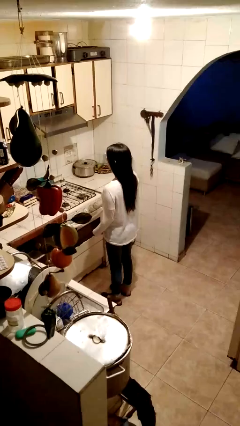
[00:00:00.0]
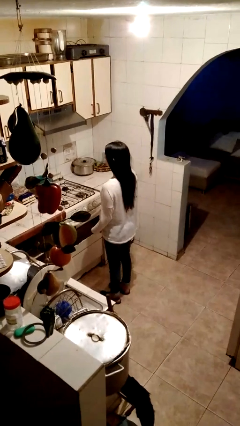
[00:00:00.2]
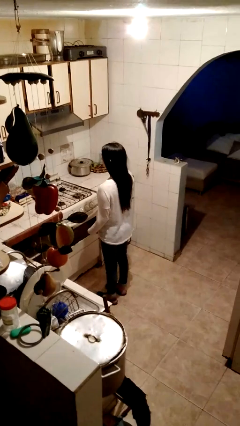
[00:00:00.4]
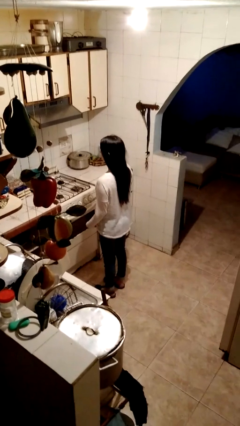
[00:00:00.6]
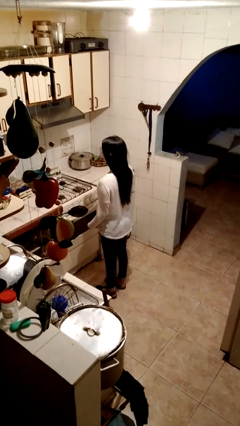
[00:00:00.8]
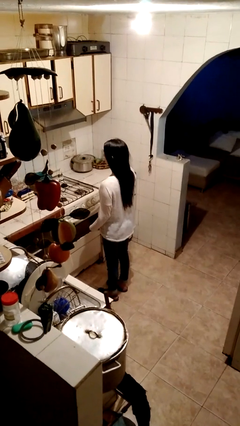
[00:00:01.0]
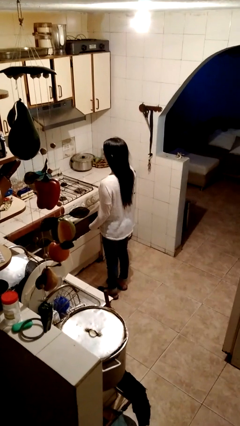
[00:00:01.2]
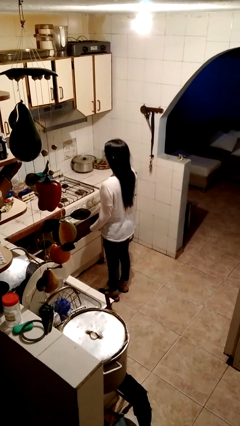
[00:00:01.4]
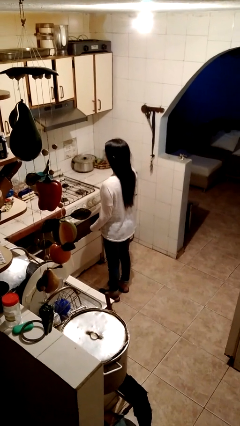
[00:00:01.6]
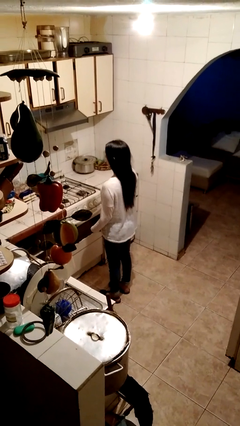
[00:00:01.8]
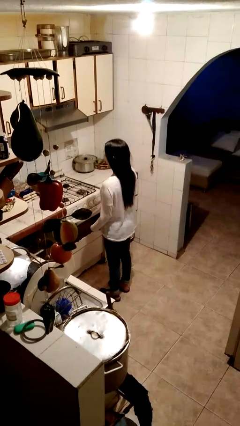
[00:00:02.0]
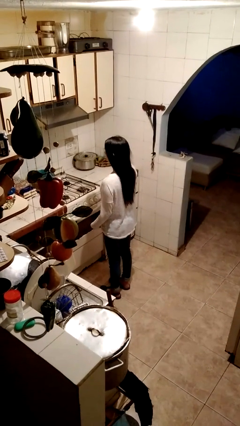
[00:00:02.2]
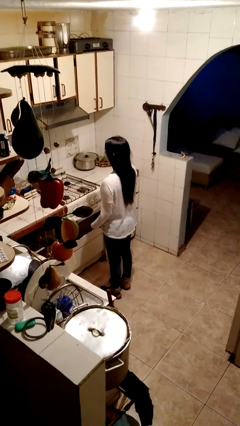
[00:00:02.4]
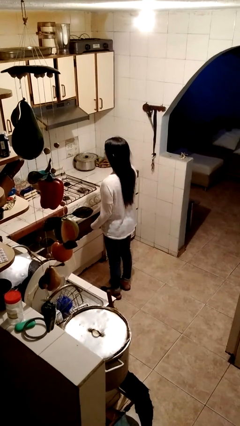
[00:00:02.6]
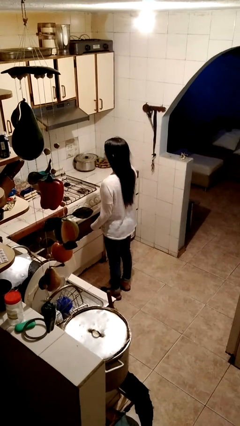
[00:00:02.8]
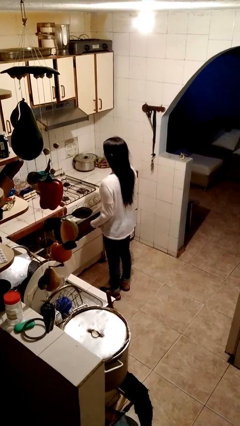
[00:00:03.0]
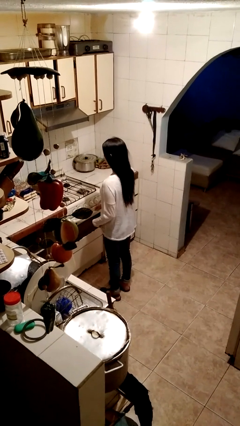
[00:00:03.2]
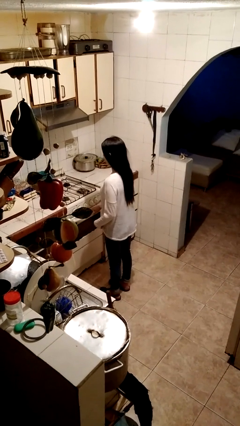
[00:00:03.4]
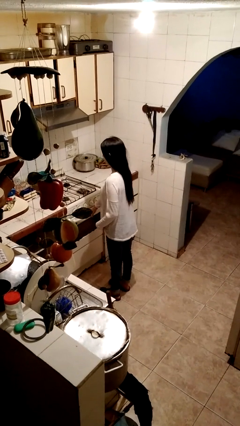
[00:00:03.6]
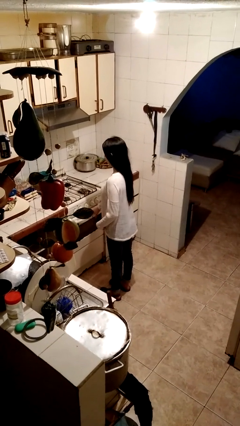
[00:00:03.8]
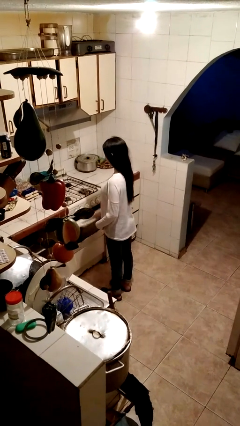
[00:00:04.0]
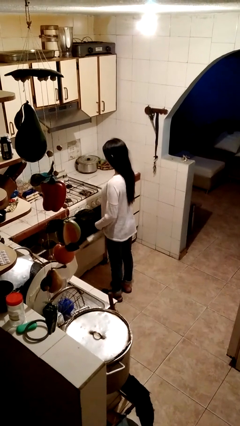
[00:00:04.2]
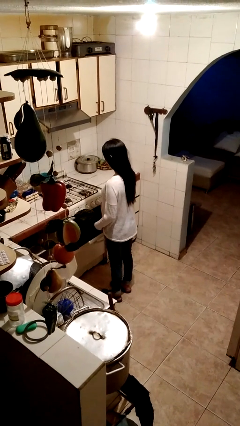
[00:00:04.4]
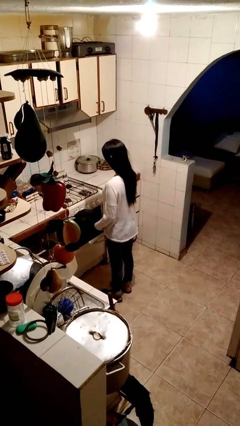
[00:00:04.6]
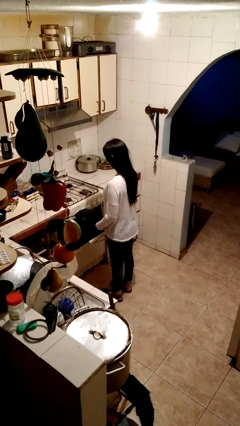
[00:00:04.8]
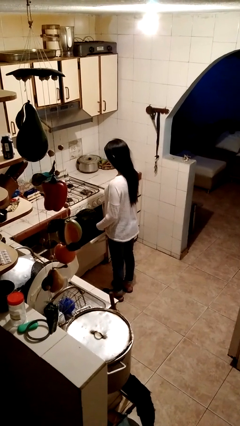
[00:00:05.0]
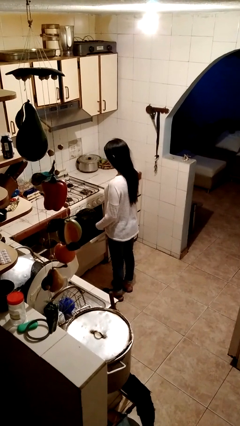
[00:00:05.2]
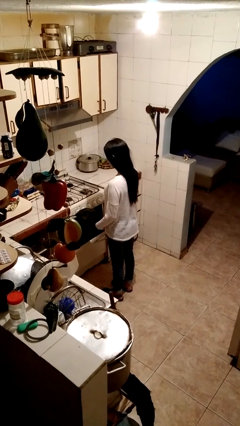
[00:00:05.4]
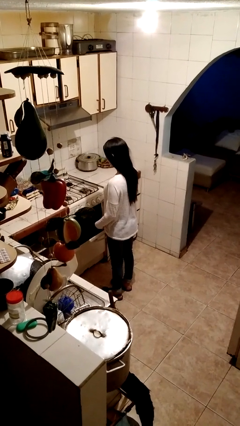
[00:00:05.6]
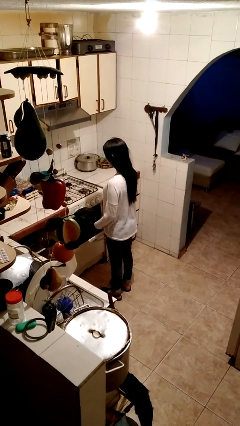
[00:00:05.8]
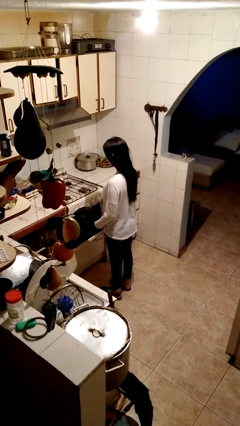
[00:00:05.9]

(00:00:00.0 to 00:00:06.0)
person opens oven door

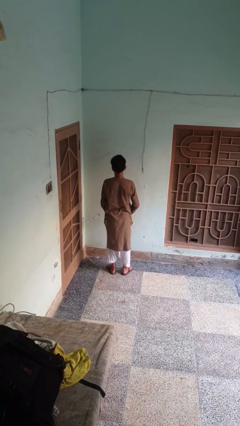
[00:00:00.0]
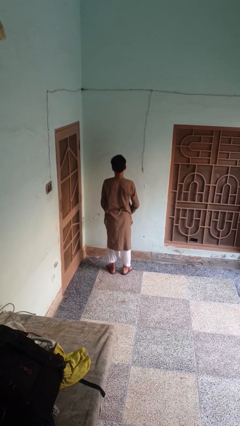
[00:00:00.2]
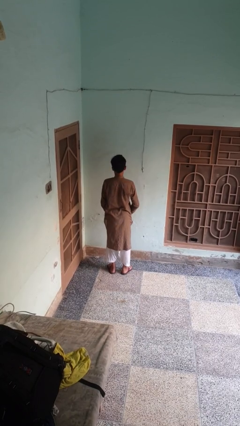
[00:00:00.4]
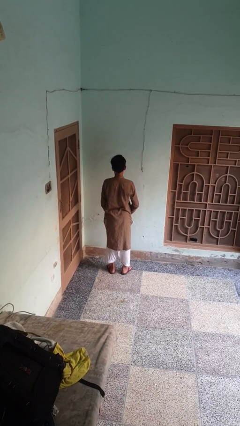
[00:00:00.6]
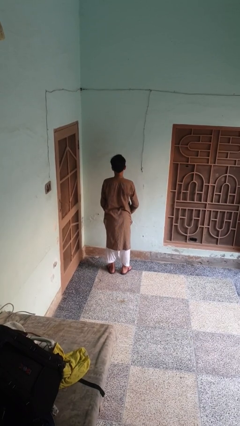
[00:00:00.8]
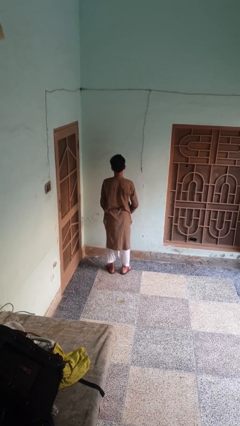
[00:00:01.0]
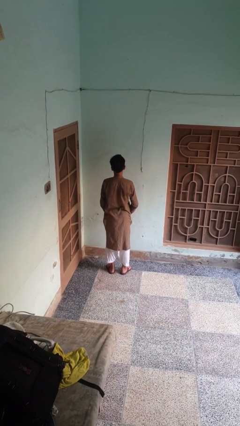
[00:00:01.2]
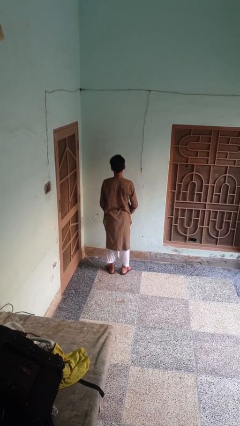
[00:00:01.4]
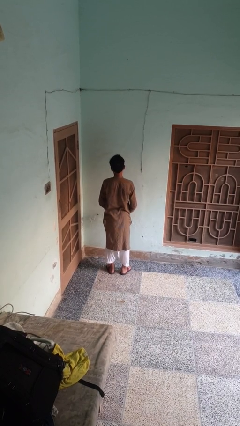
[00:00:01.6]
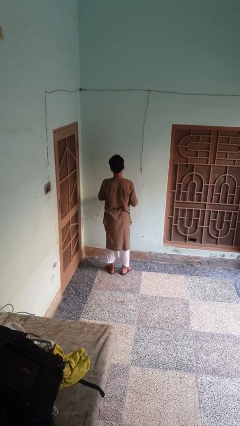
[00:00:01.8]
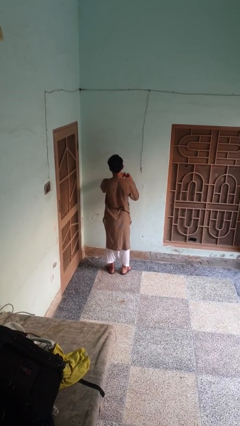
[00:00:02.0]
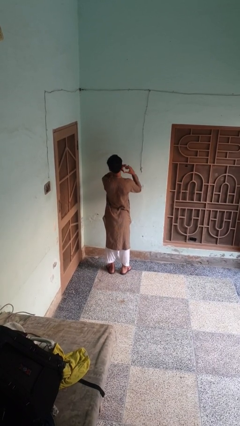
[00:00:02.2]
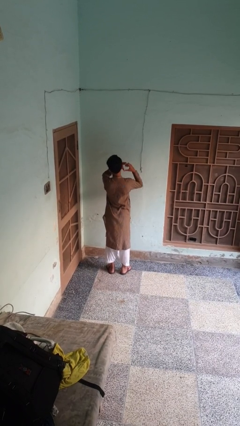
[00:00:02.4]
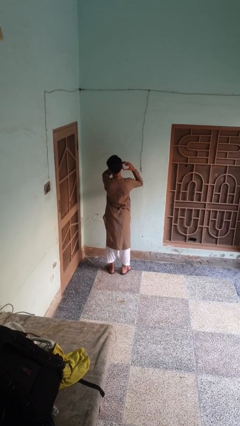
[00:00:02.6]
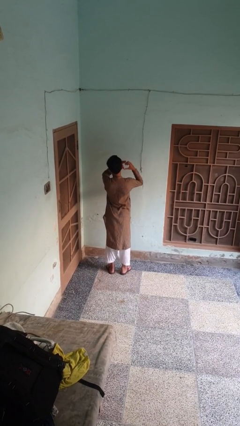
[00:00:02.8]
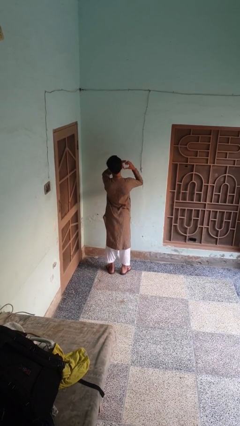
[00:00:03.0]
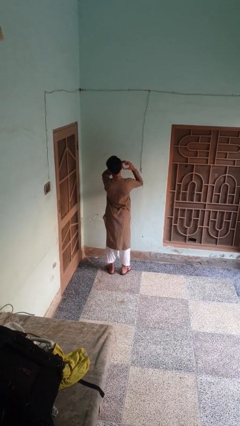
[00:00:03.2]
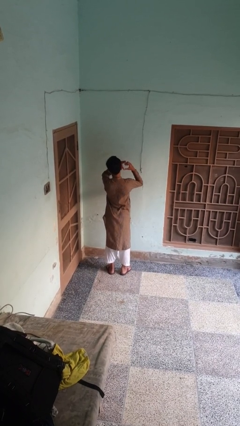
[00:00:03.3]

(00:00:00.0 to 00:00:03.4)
person gestures heart

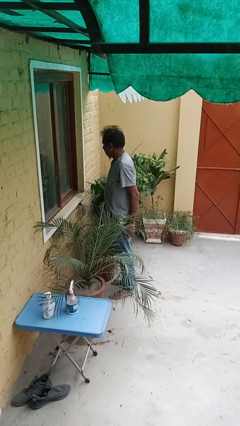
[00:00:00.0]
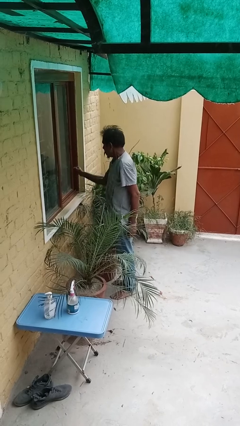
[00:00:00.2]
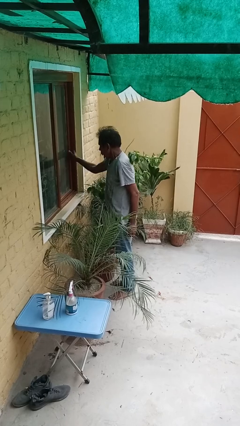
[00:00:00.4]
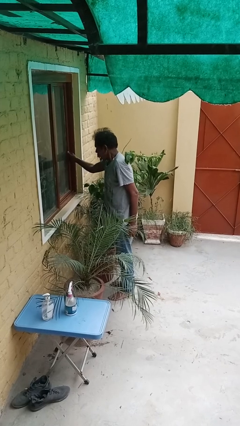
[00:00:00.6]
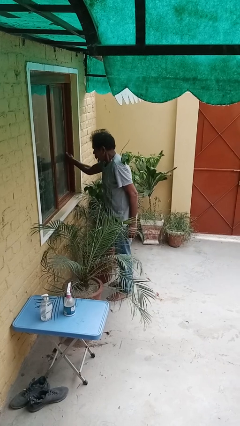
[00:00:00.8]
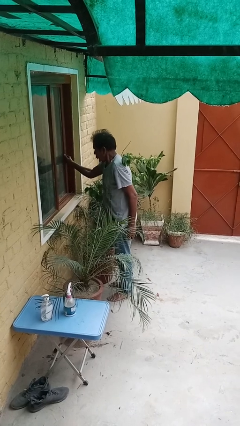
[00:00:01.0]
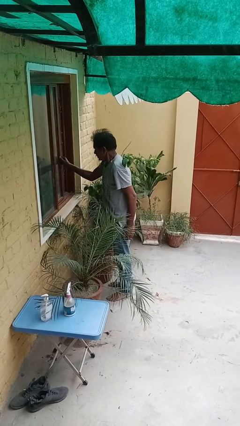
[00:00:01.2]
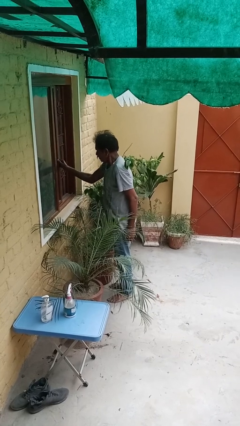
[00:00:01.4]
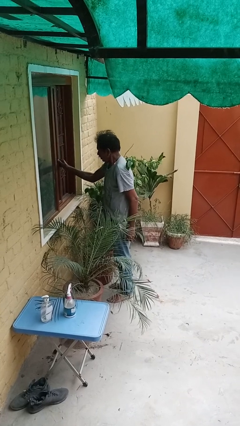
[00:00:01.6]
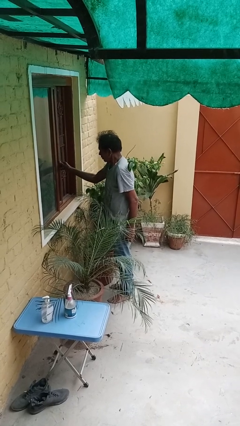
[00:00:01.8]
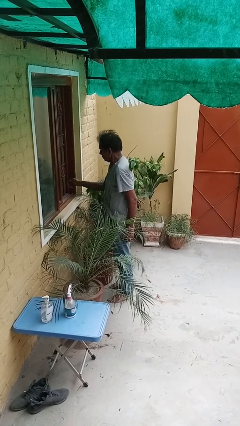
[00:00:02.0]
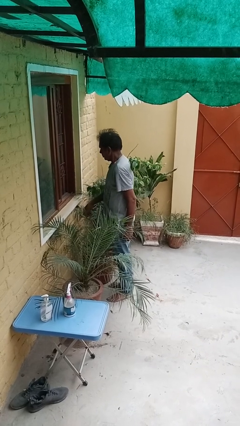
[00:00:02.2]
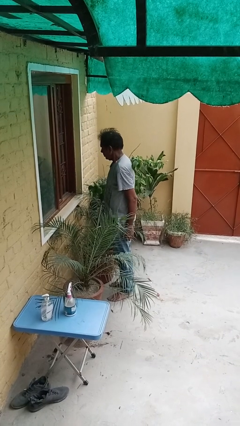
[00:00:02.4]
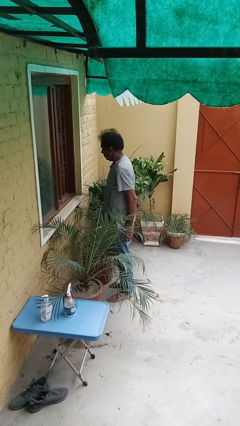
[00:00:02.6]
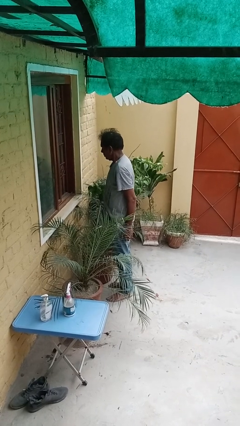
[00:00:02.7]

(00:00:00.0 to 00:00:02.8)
person opens home window

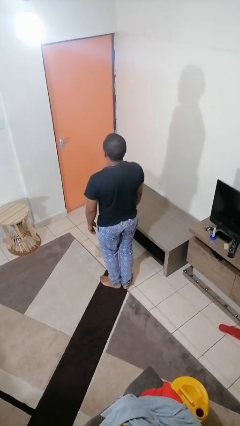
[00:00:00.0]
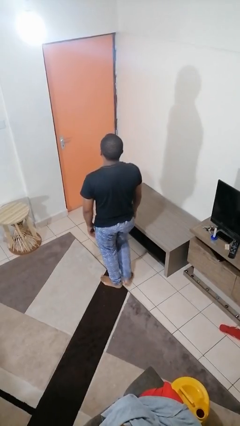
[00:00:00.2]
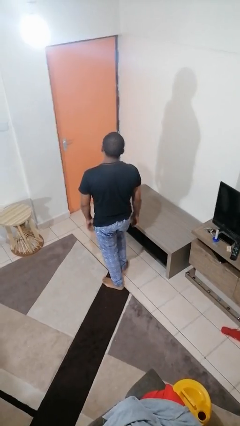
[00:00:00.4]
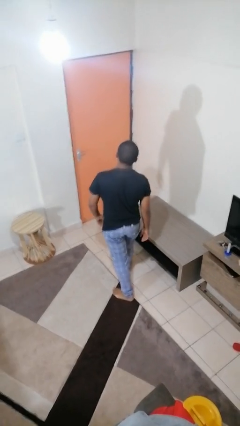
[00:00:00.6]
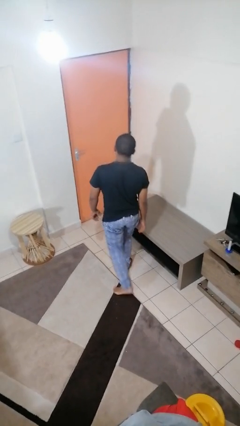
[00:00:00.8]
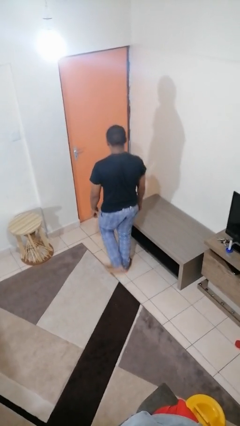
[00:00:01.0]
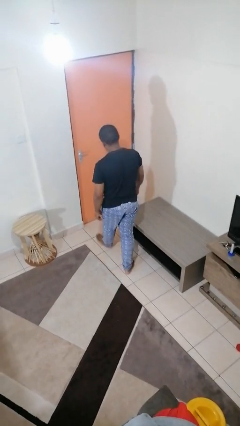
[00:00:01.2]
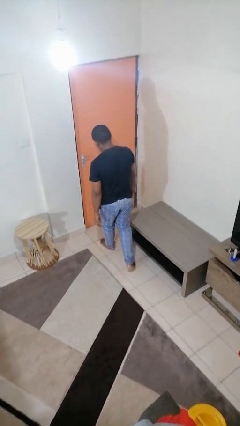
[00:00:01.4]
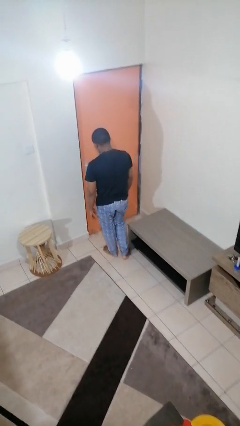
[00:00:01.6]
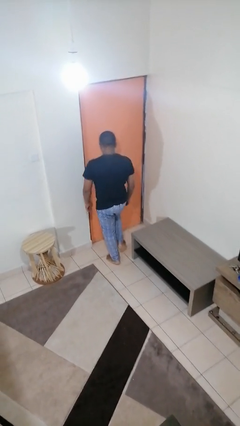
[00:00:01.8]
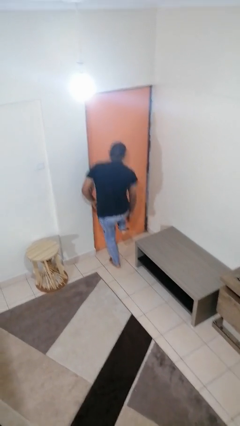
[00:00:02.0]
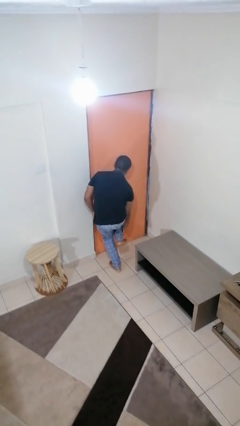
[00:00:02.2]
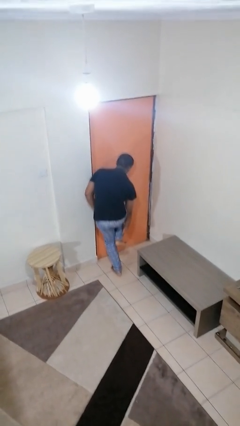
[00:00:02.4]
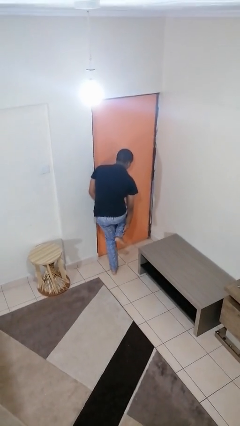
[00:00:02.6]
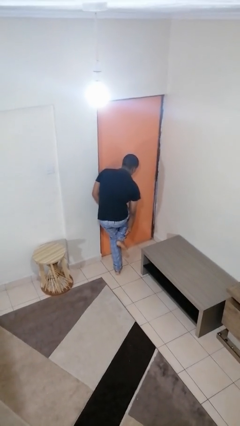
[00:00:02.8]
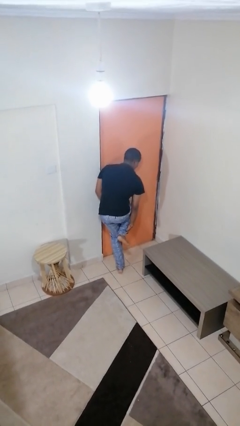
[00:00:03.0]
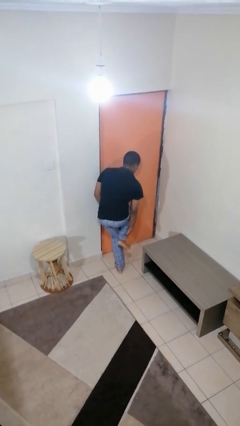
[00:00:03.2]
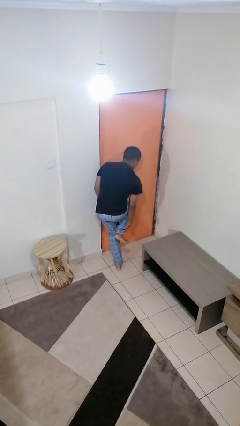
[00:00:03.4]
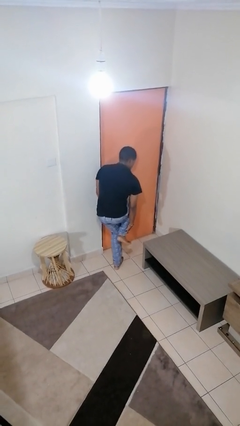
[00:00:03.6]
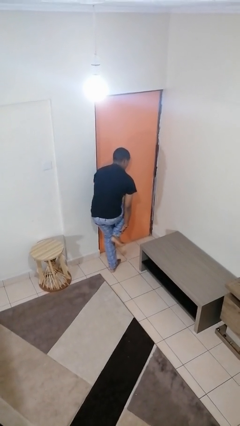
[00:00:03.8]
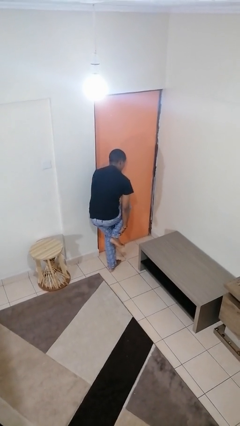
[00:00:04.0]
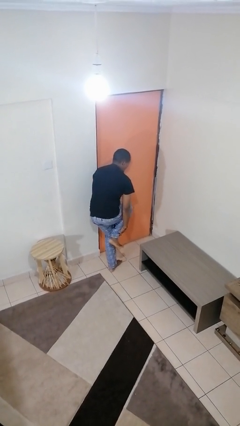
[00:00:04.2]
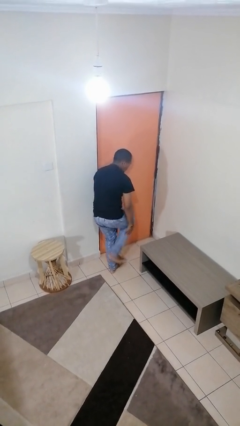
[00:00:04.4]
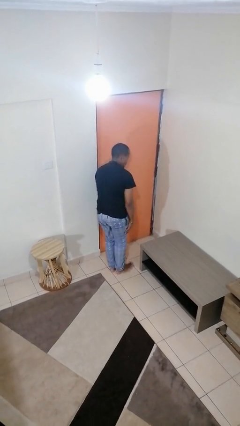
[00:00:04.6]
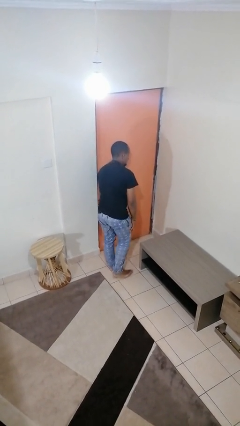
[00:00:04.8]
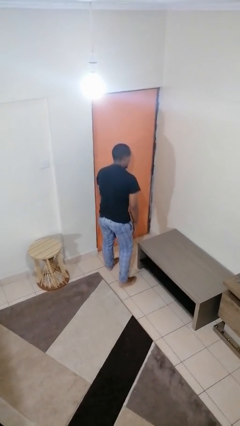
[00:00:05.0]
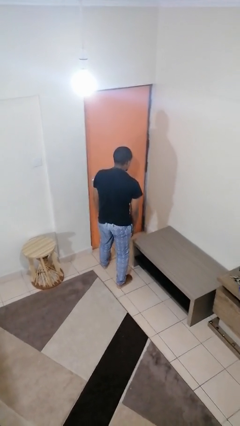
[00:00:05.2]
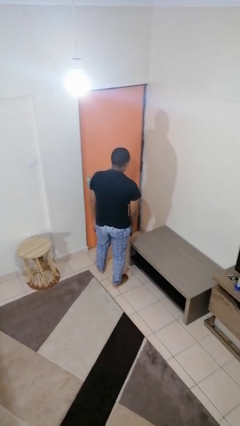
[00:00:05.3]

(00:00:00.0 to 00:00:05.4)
person stubs toe
